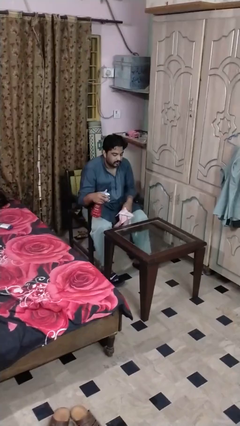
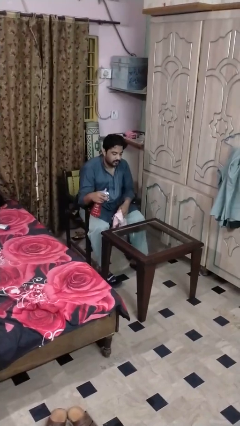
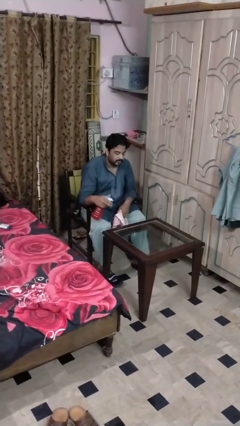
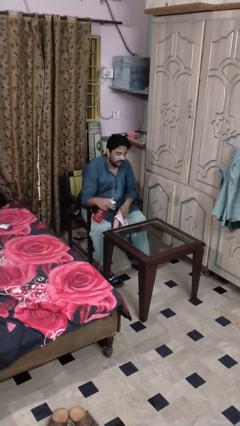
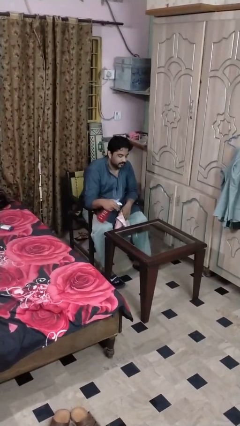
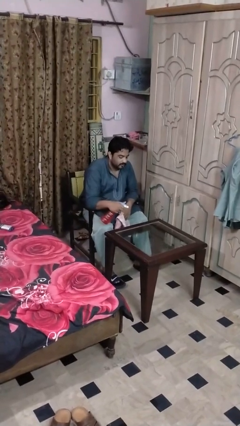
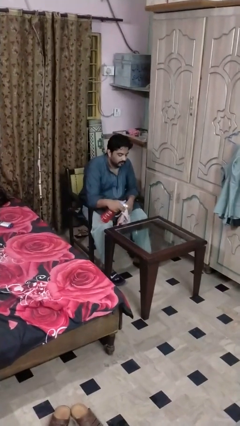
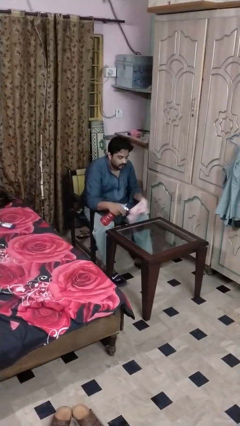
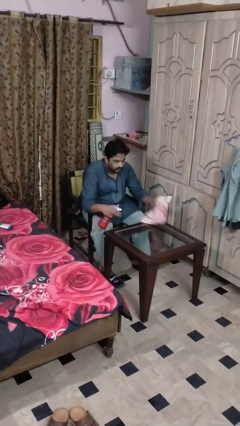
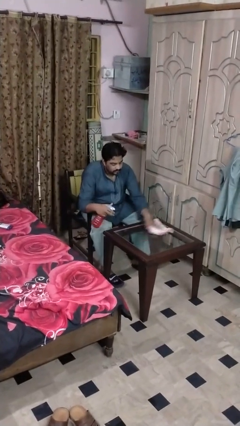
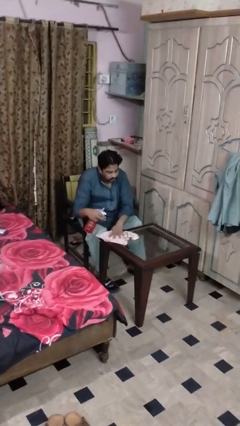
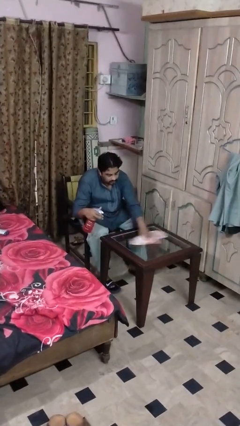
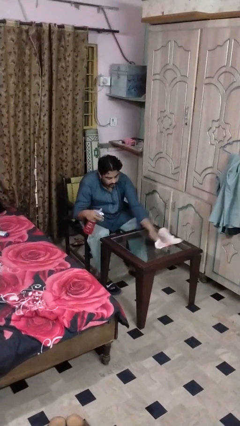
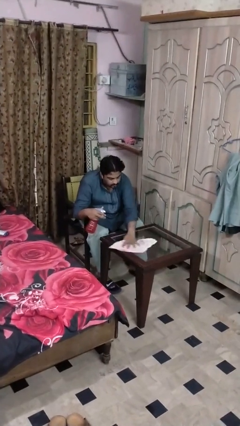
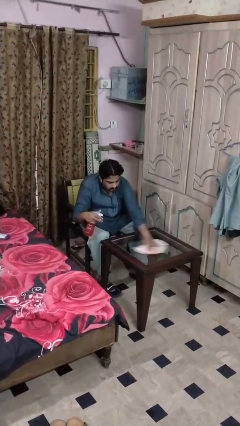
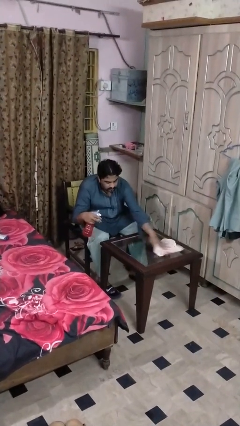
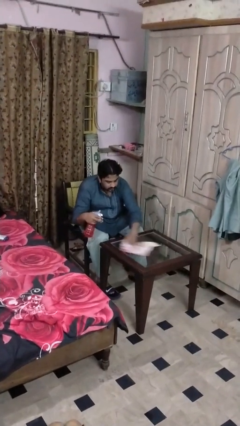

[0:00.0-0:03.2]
person sprays from bottle

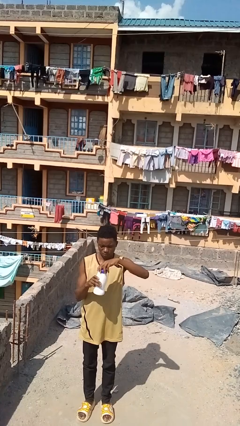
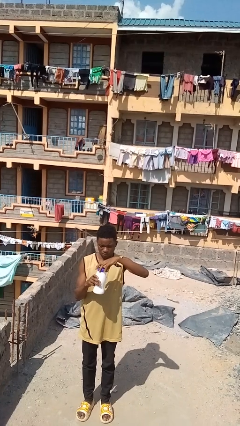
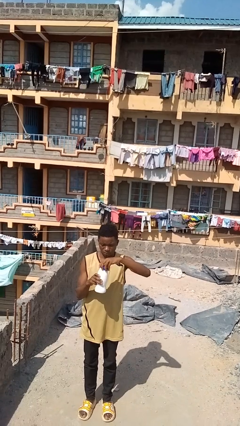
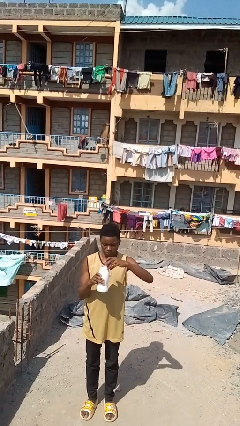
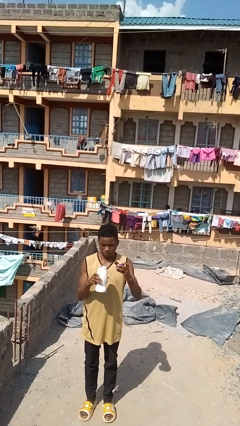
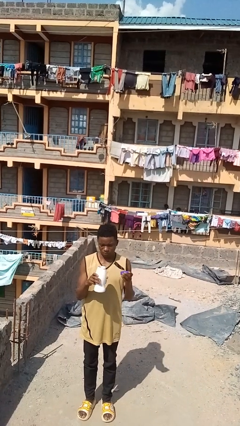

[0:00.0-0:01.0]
person opens beverage can

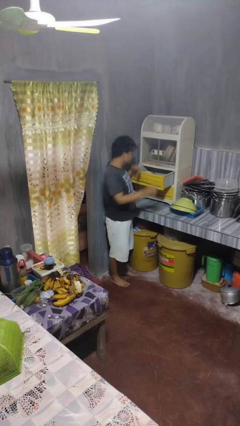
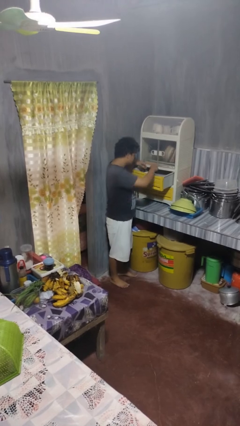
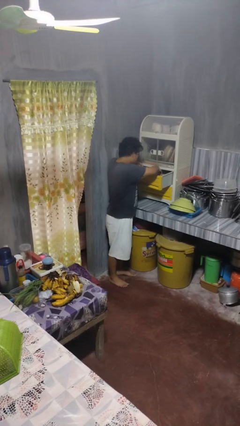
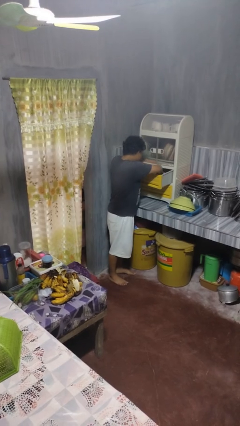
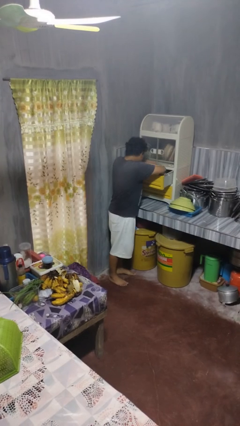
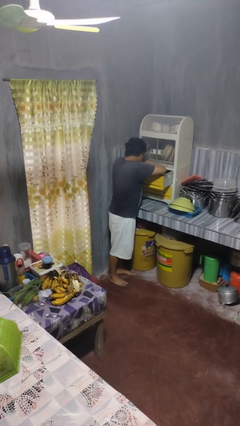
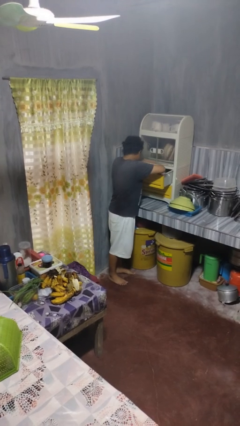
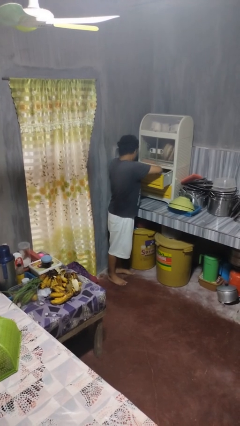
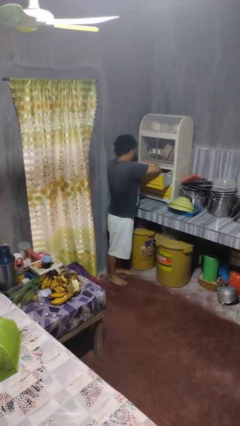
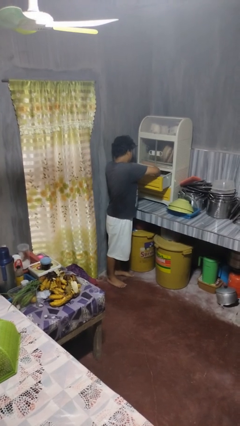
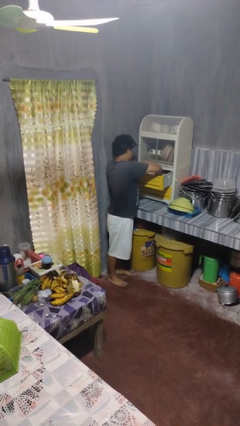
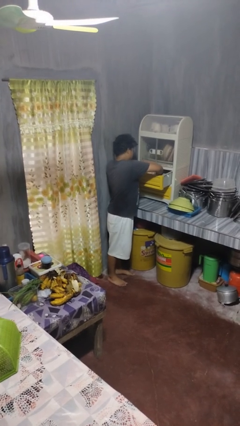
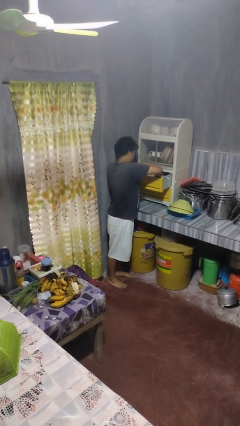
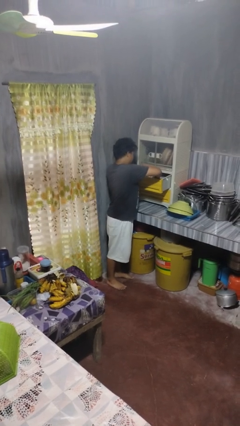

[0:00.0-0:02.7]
person takes object from kitchen drawer

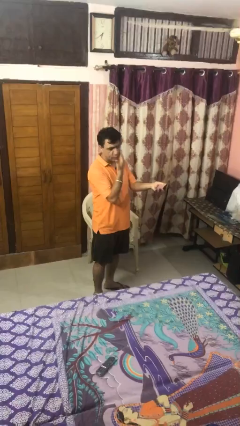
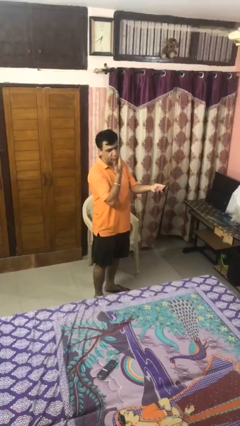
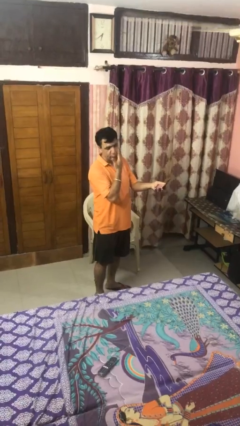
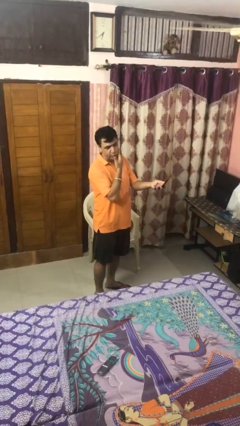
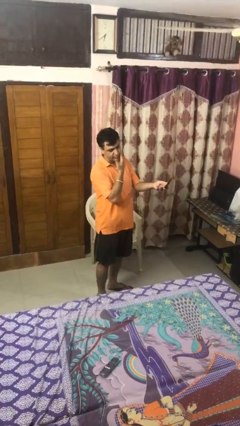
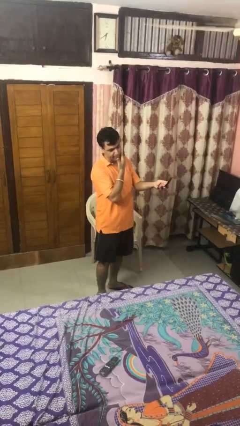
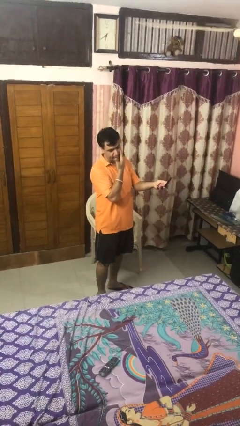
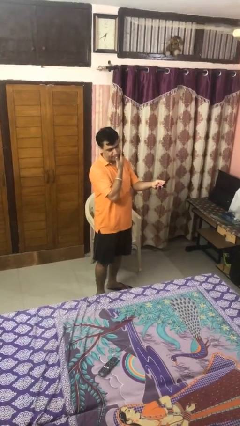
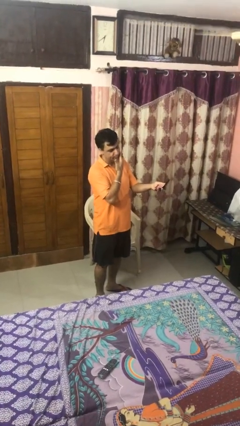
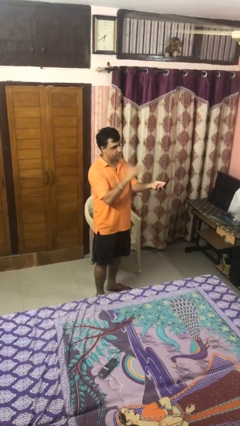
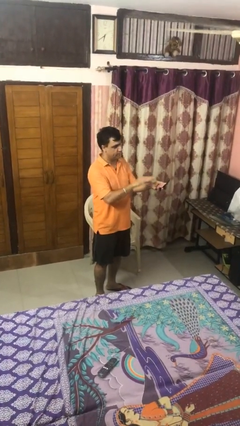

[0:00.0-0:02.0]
person applies foundation makeup

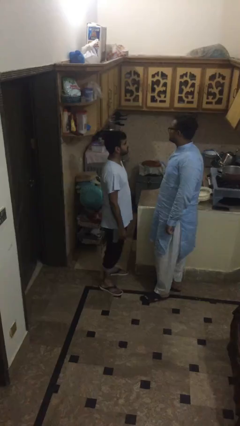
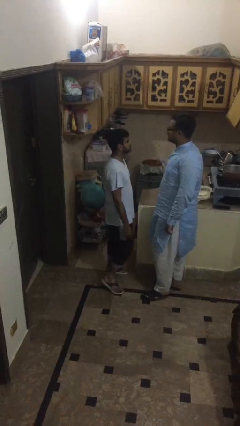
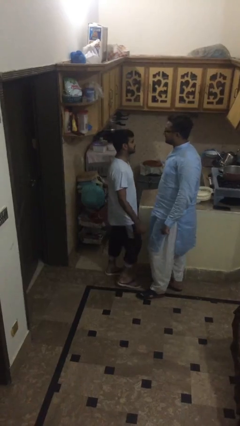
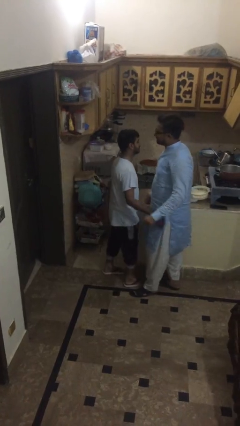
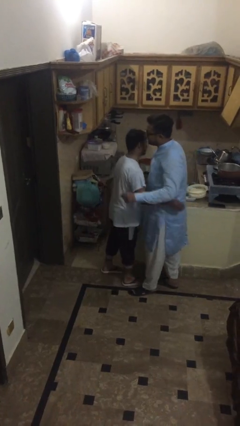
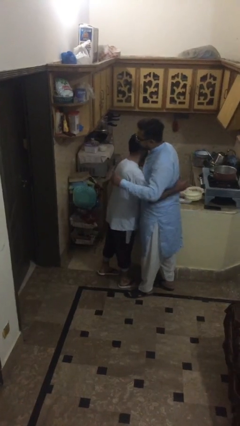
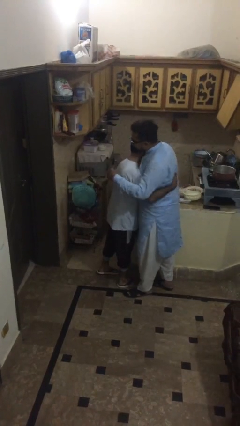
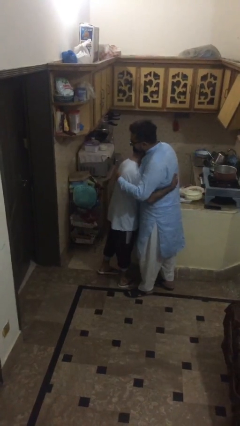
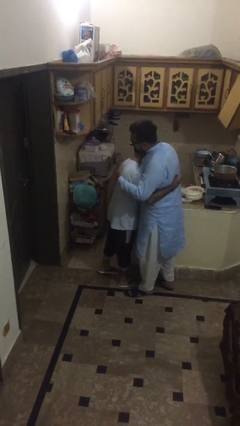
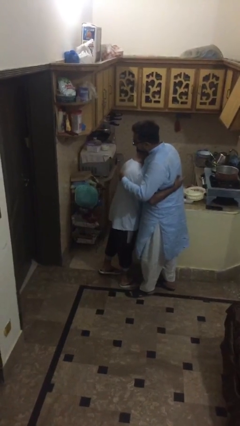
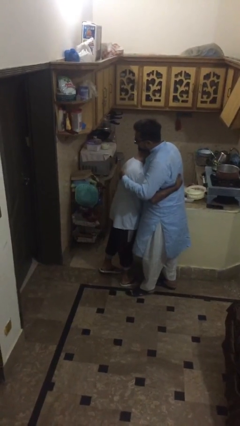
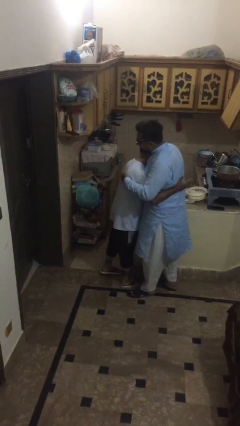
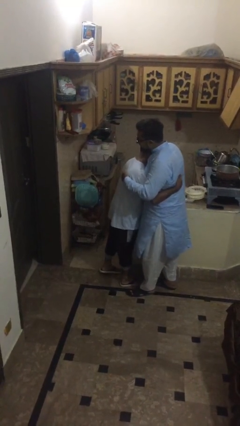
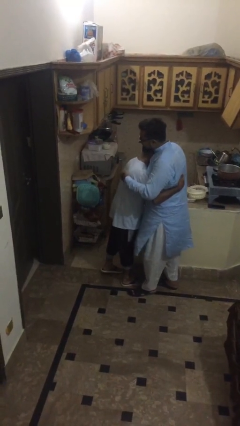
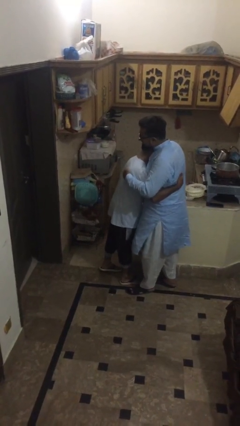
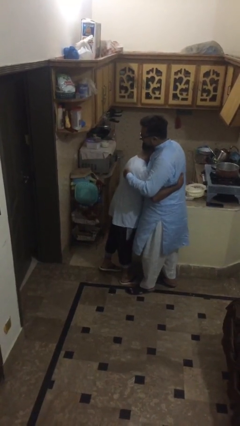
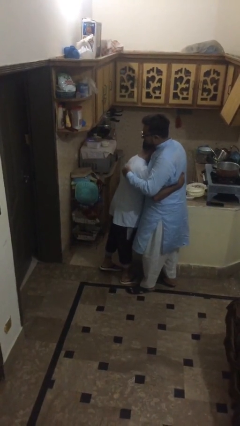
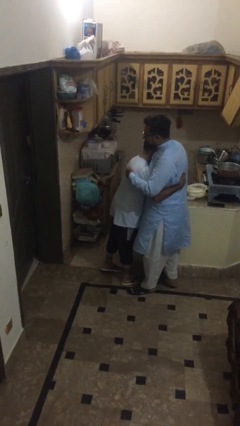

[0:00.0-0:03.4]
person embraces person

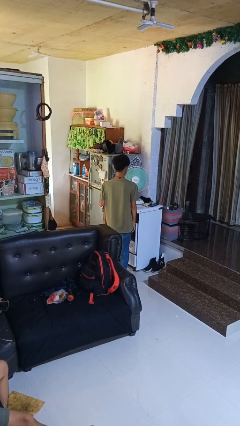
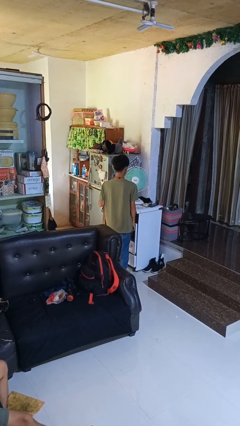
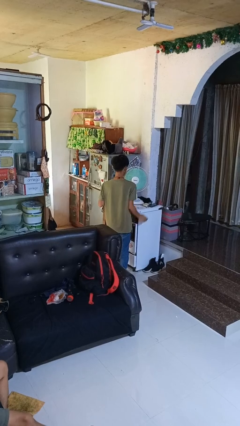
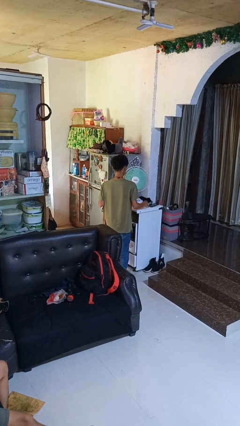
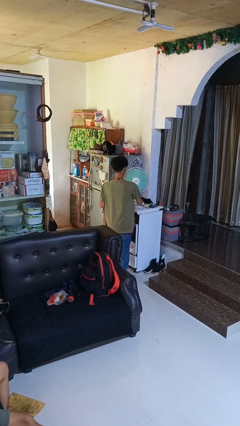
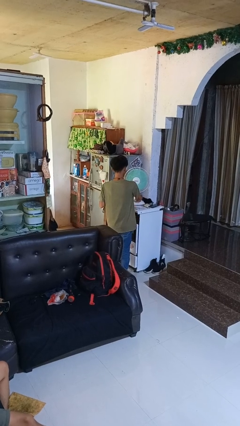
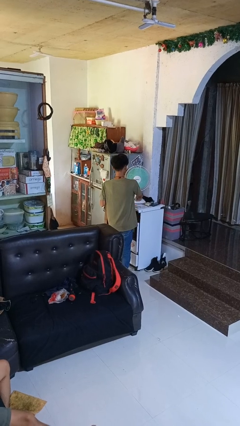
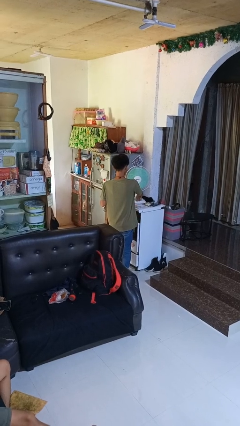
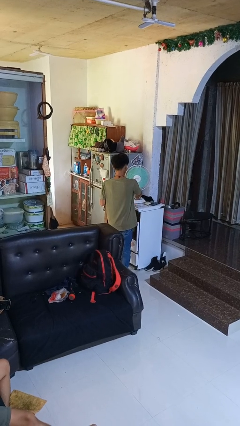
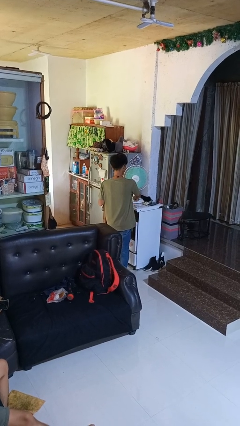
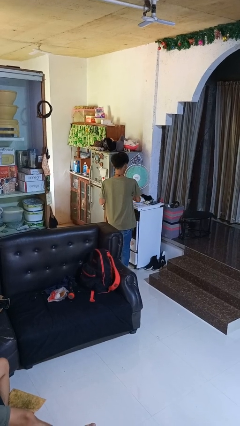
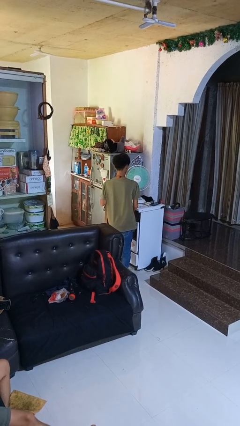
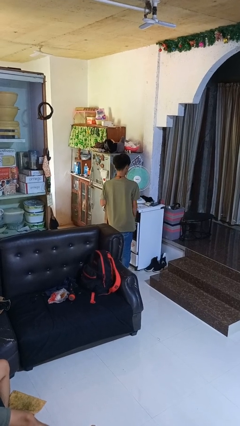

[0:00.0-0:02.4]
person turns off fan

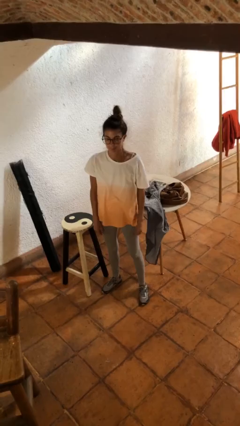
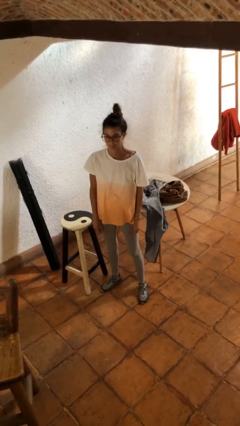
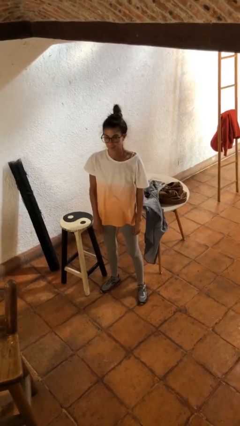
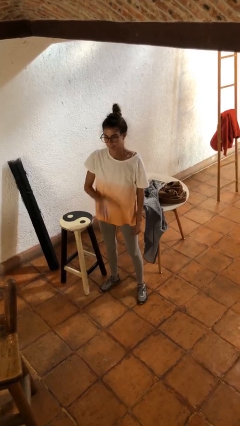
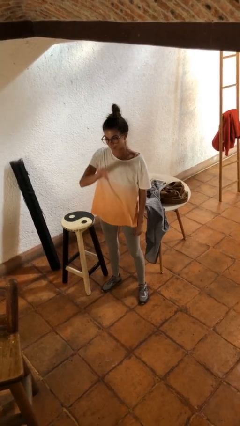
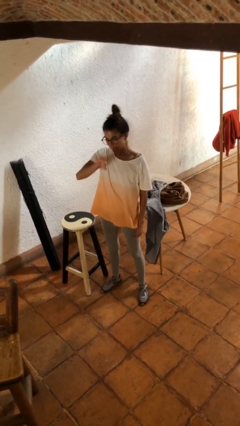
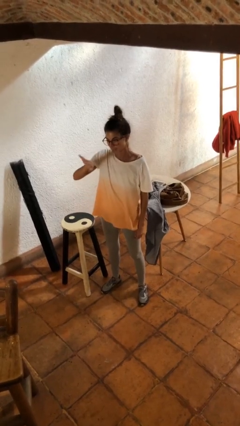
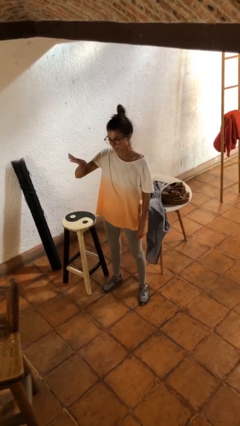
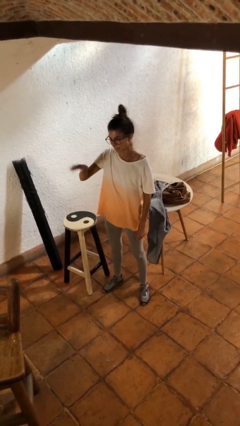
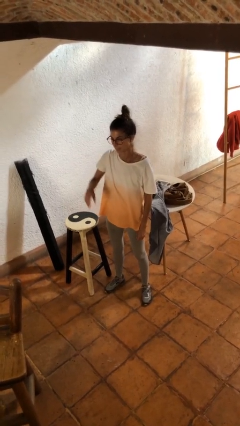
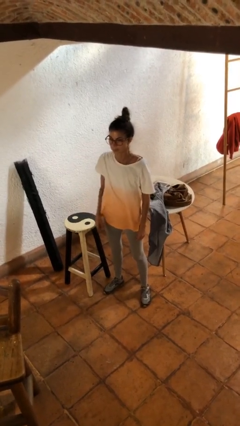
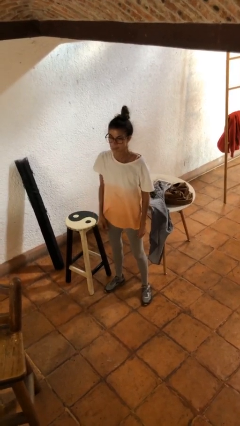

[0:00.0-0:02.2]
person gestures swipe right

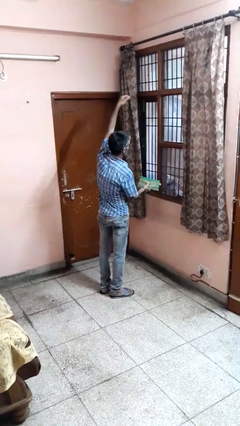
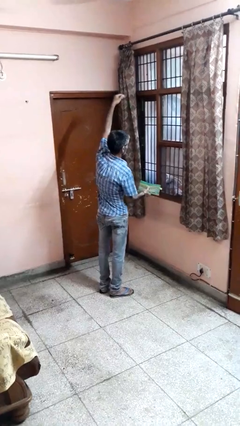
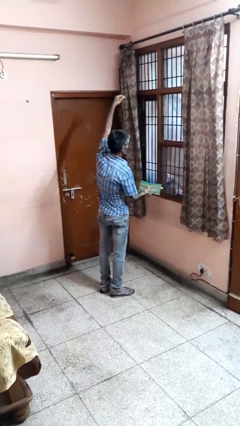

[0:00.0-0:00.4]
person catches dropped object
